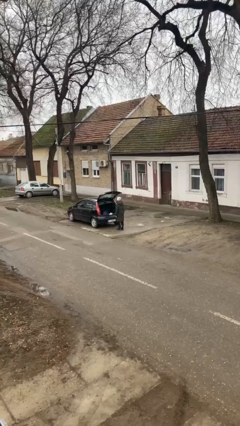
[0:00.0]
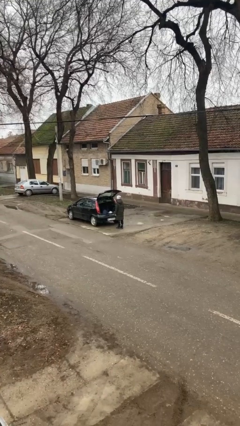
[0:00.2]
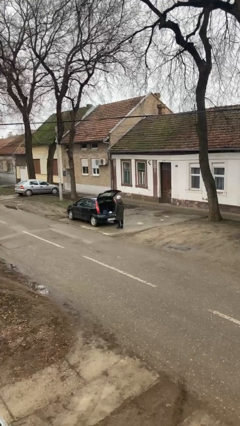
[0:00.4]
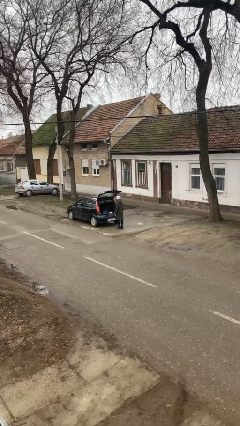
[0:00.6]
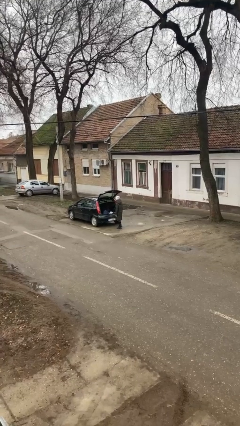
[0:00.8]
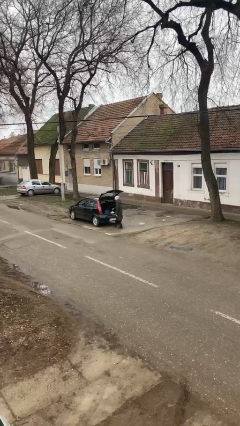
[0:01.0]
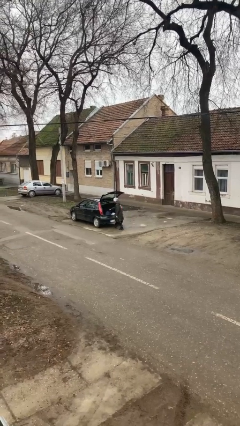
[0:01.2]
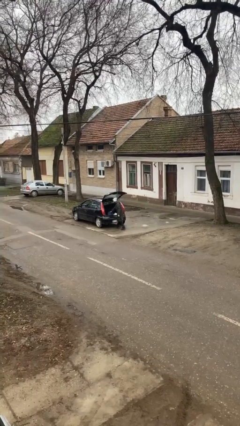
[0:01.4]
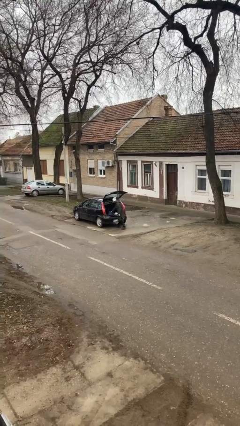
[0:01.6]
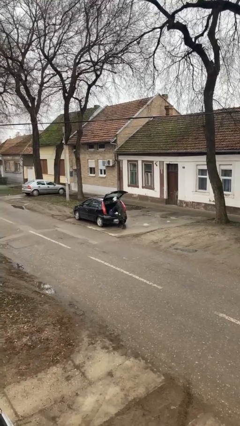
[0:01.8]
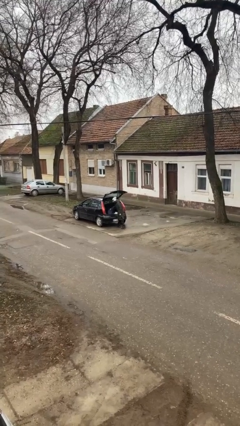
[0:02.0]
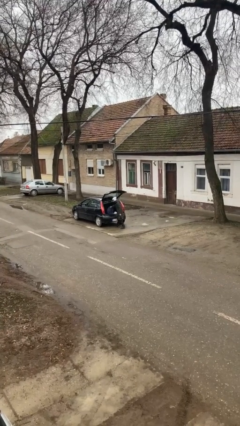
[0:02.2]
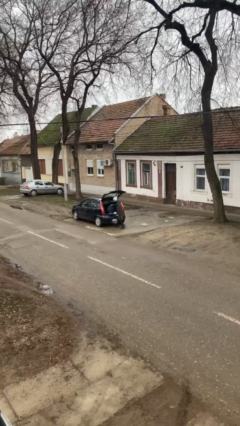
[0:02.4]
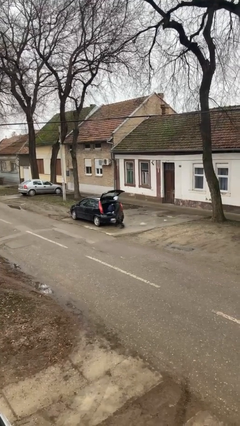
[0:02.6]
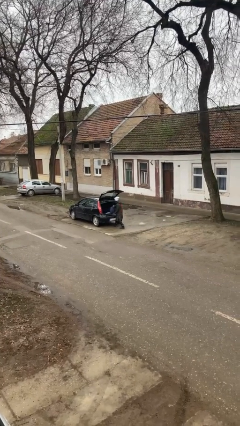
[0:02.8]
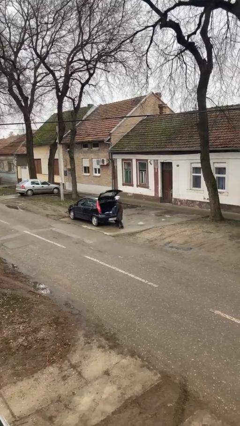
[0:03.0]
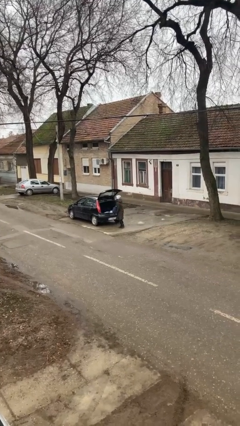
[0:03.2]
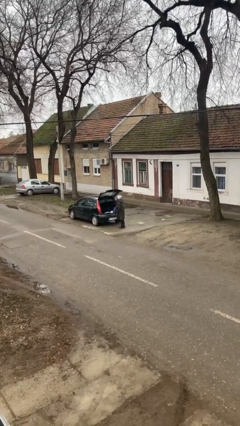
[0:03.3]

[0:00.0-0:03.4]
person unloads car

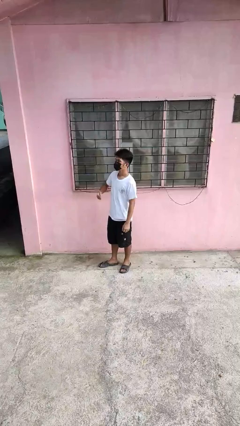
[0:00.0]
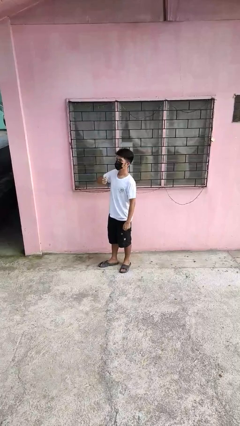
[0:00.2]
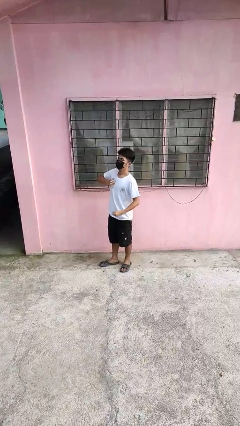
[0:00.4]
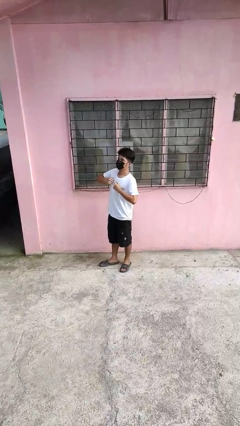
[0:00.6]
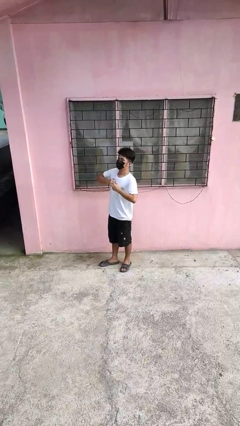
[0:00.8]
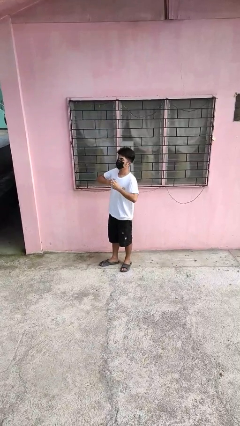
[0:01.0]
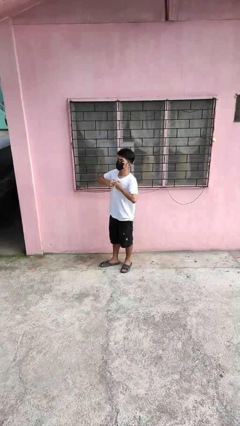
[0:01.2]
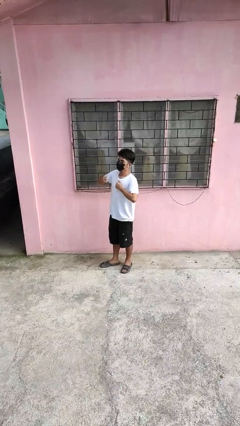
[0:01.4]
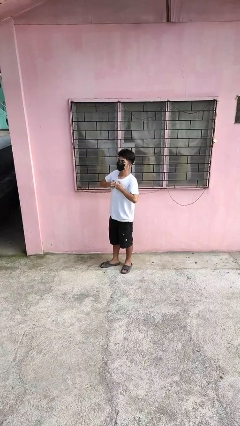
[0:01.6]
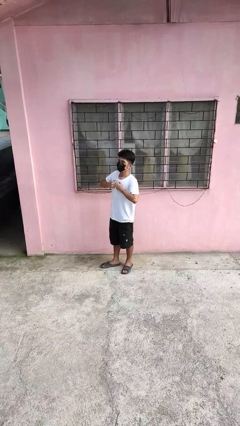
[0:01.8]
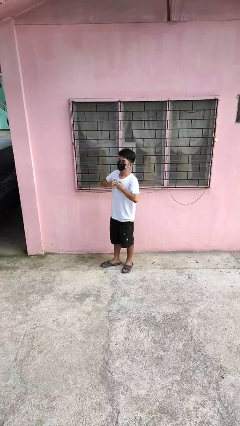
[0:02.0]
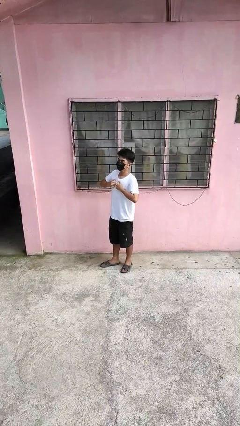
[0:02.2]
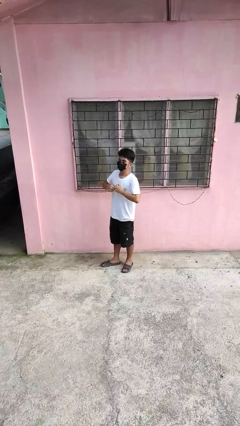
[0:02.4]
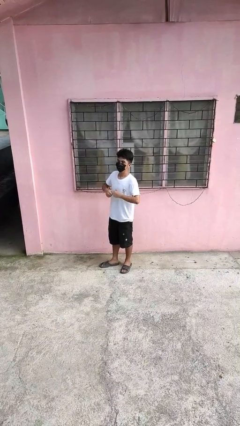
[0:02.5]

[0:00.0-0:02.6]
person drums on chest

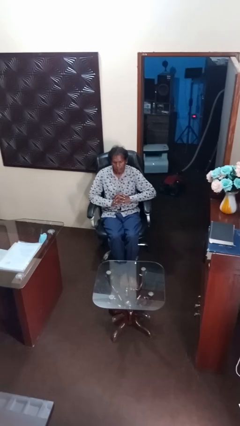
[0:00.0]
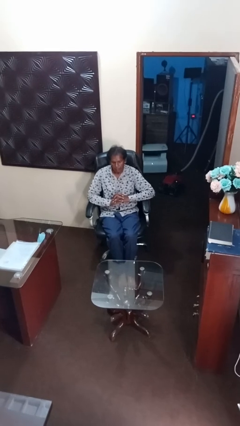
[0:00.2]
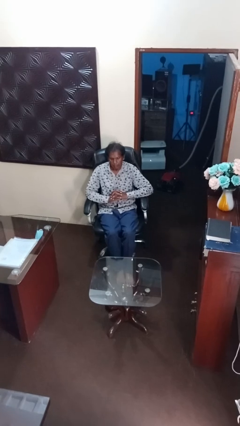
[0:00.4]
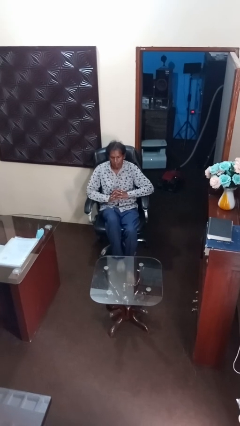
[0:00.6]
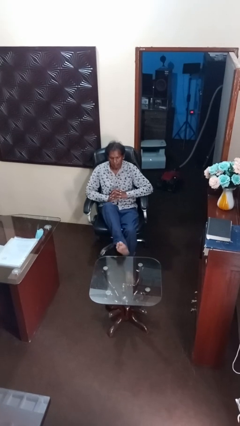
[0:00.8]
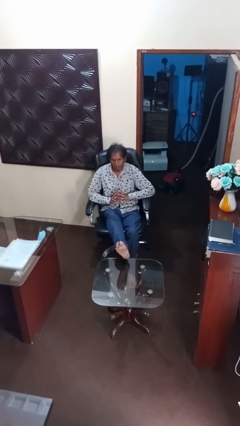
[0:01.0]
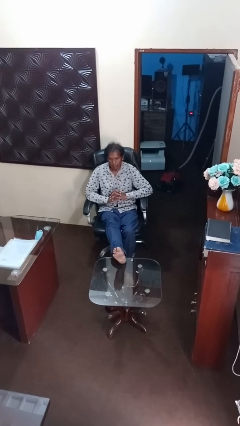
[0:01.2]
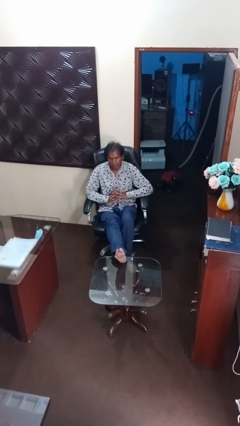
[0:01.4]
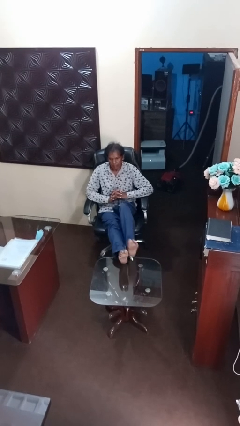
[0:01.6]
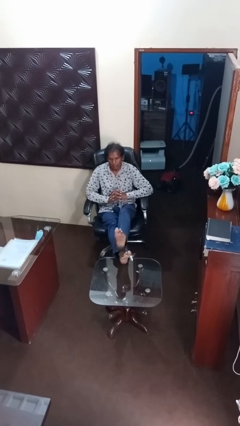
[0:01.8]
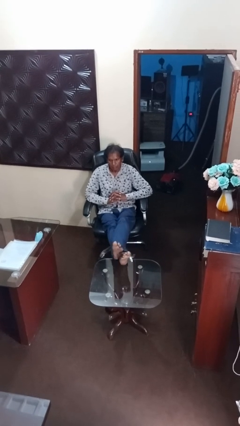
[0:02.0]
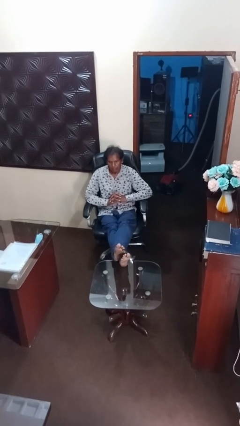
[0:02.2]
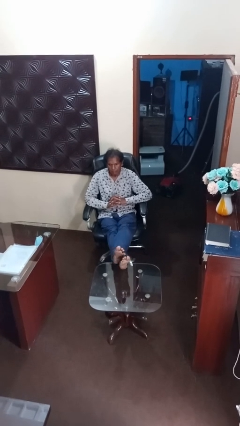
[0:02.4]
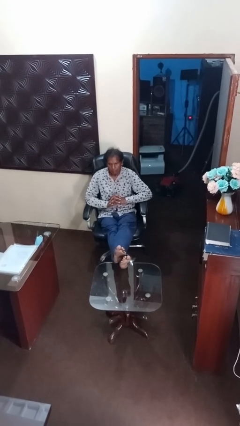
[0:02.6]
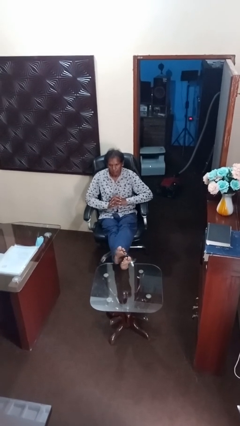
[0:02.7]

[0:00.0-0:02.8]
person puts feet up

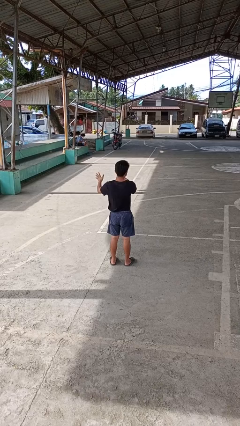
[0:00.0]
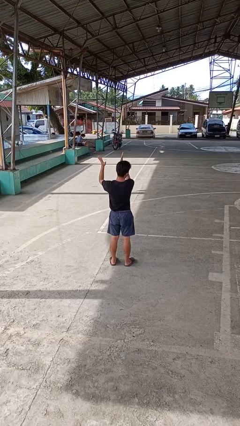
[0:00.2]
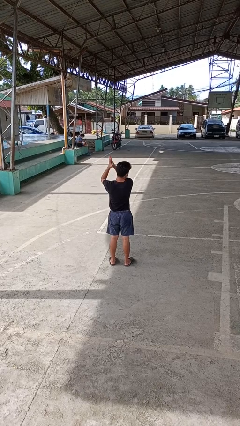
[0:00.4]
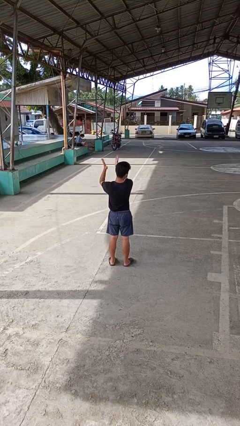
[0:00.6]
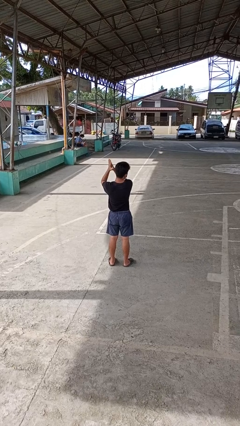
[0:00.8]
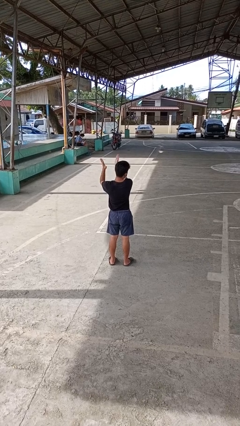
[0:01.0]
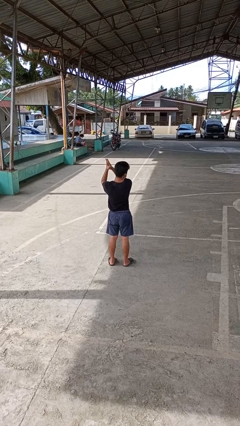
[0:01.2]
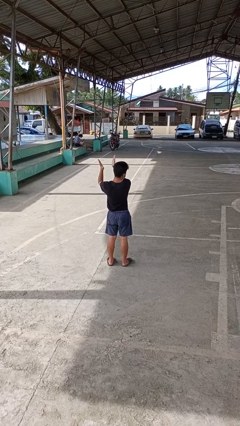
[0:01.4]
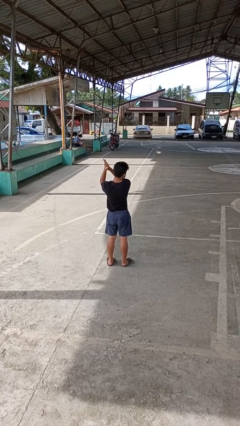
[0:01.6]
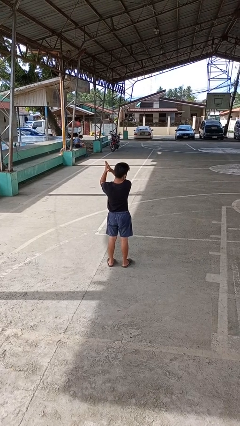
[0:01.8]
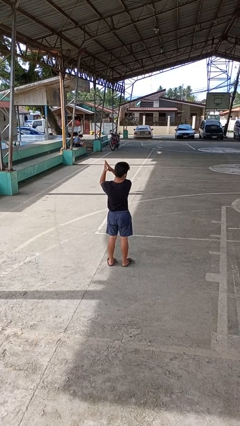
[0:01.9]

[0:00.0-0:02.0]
person claps hands

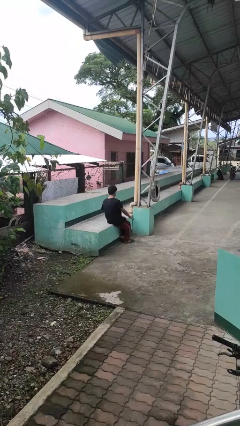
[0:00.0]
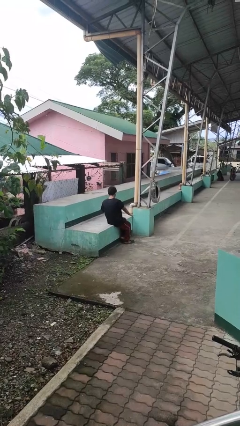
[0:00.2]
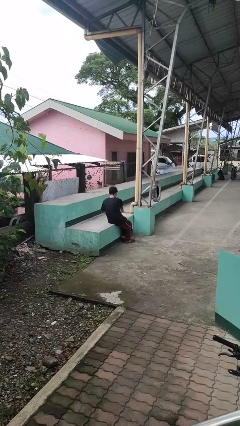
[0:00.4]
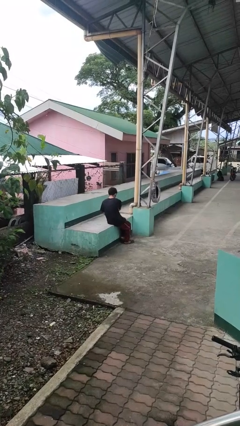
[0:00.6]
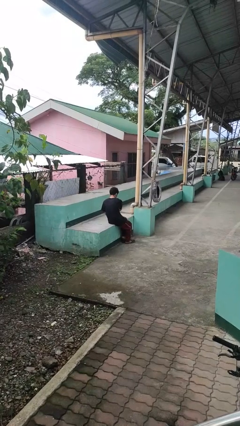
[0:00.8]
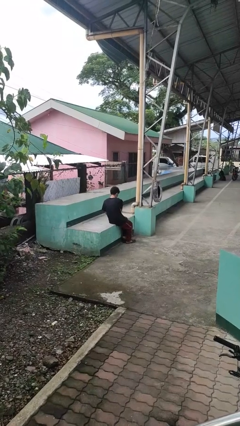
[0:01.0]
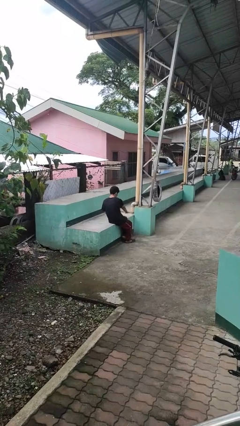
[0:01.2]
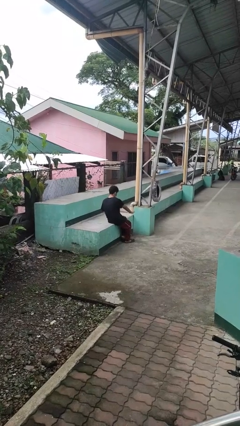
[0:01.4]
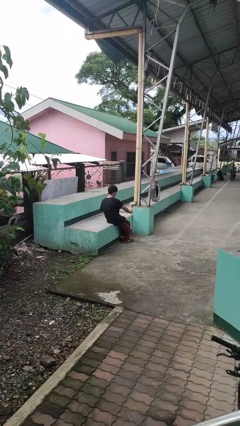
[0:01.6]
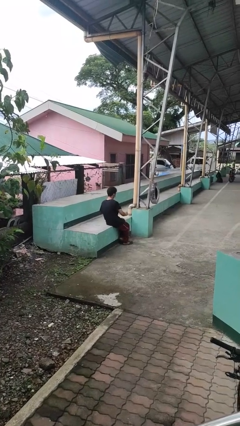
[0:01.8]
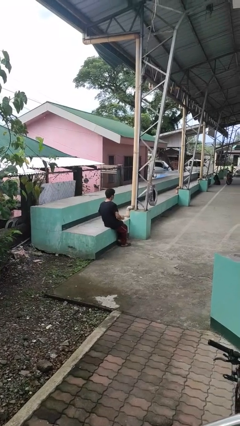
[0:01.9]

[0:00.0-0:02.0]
person waves hand over object

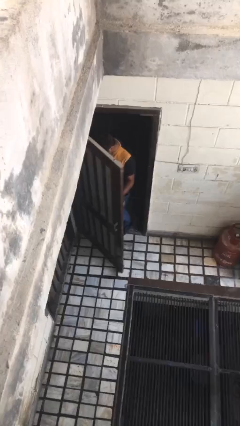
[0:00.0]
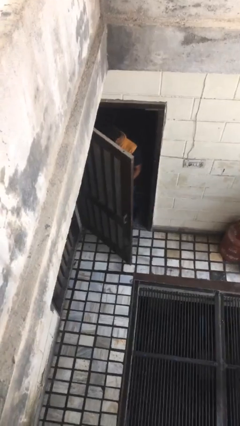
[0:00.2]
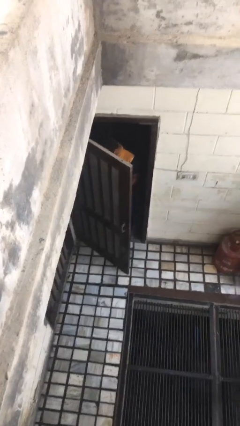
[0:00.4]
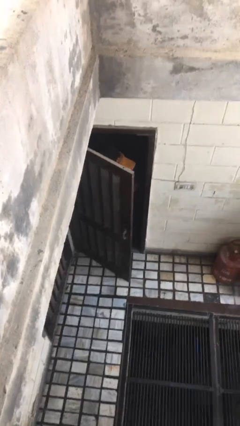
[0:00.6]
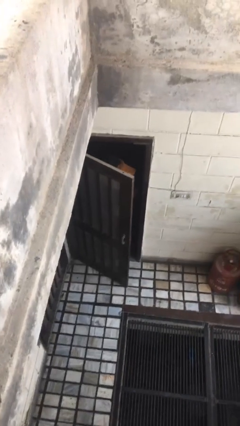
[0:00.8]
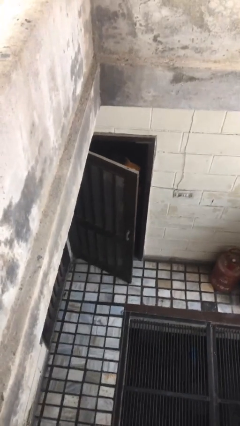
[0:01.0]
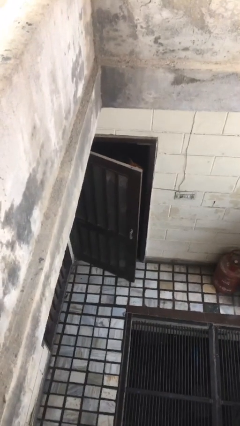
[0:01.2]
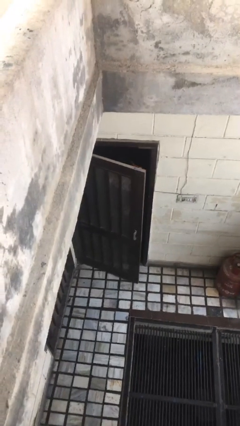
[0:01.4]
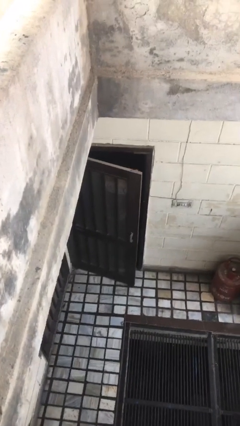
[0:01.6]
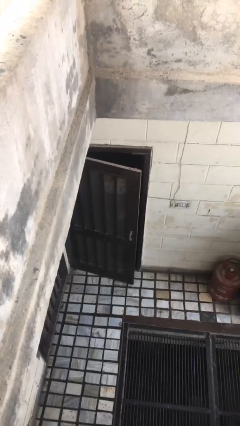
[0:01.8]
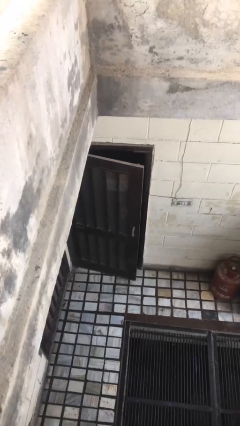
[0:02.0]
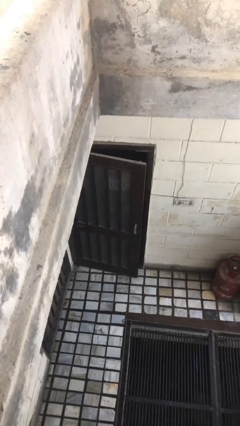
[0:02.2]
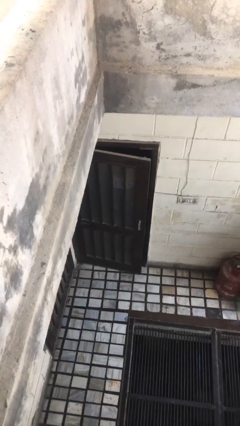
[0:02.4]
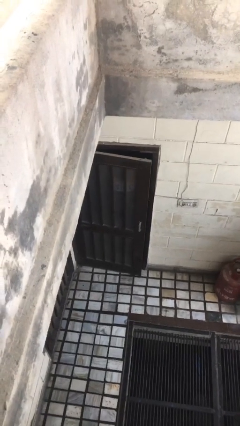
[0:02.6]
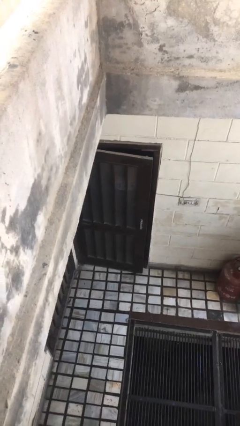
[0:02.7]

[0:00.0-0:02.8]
person closes facility door

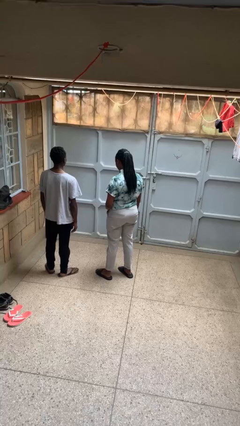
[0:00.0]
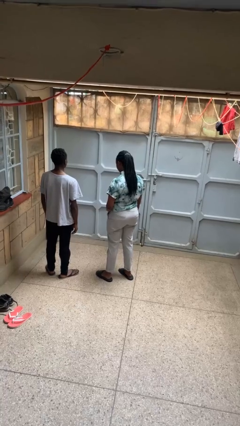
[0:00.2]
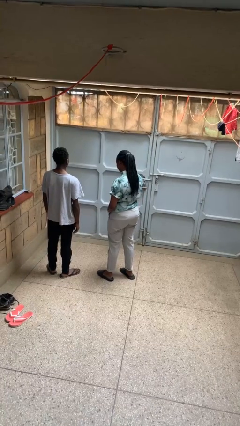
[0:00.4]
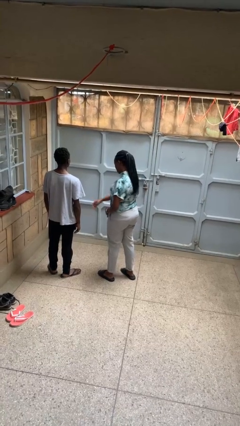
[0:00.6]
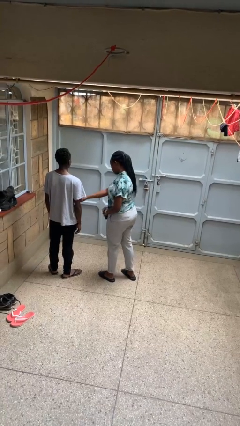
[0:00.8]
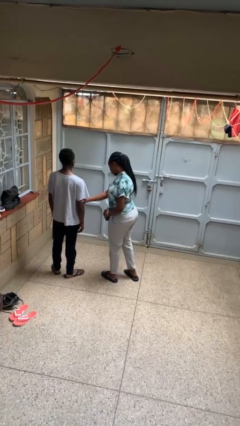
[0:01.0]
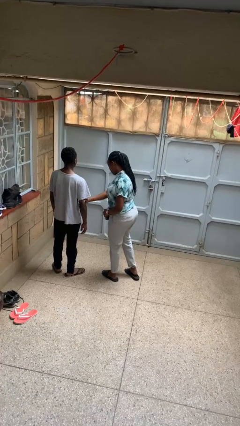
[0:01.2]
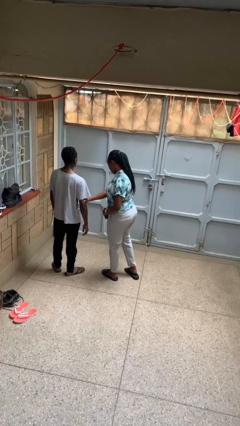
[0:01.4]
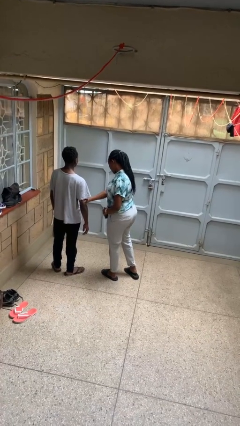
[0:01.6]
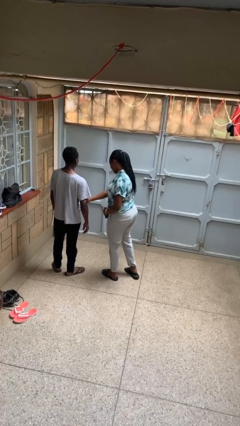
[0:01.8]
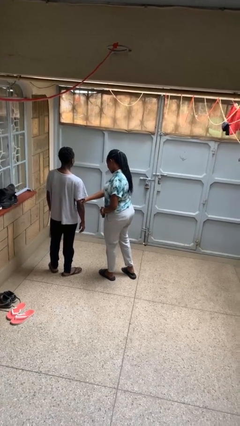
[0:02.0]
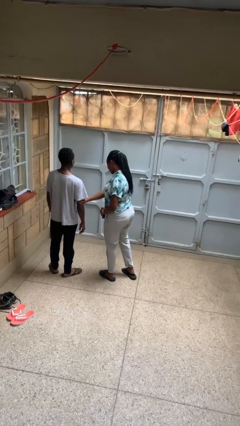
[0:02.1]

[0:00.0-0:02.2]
person grabs person by bicep
